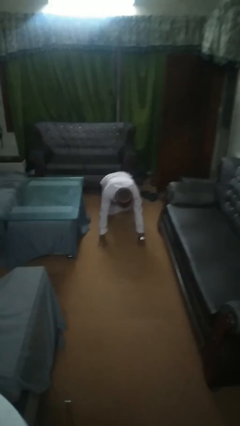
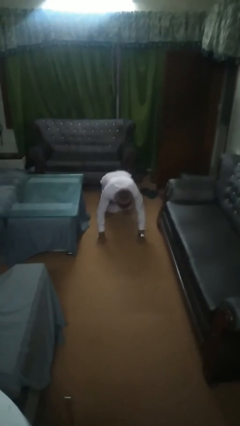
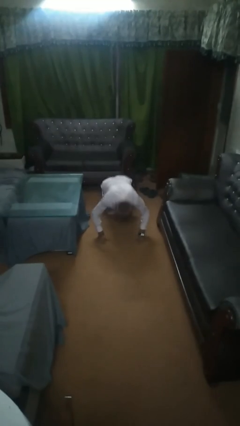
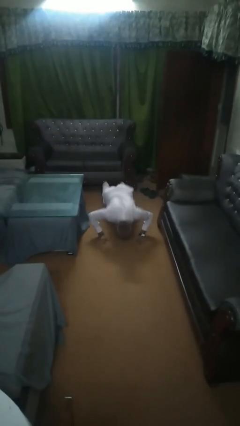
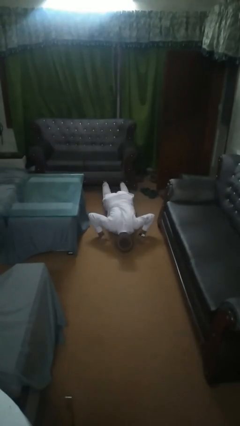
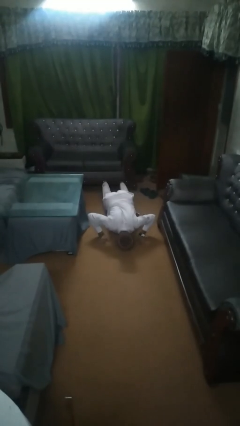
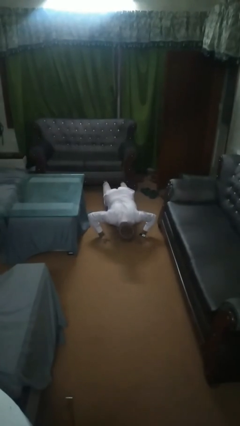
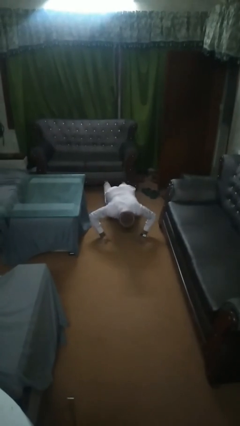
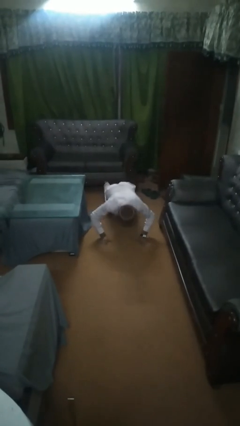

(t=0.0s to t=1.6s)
person exercises with pushup

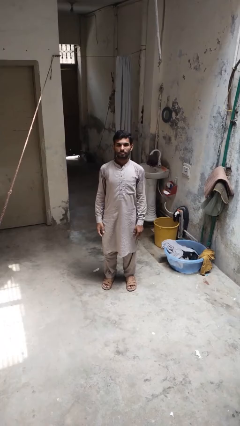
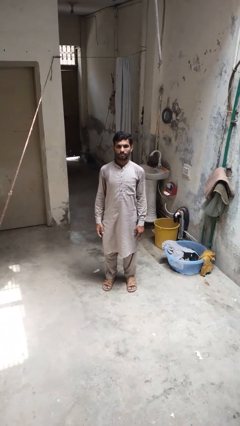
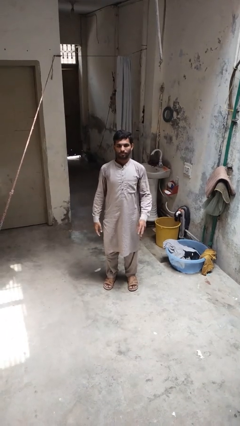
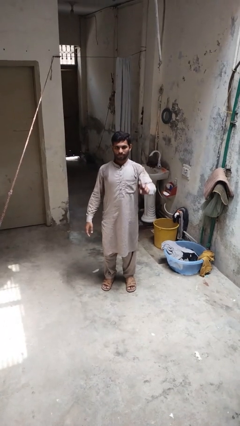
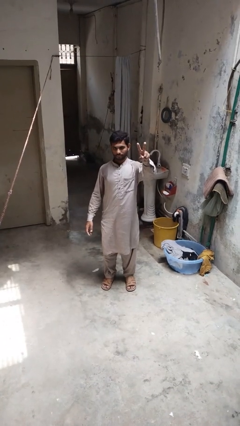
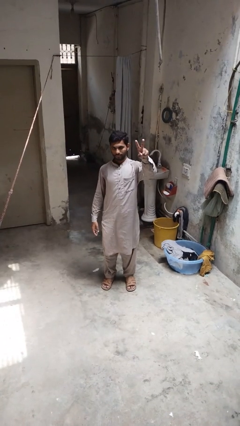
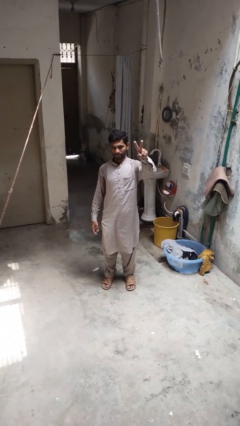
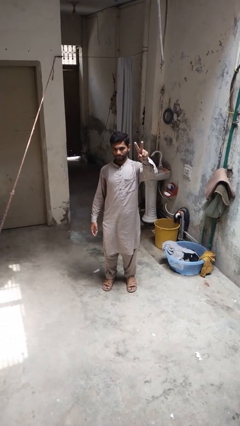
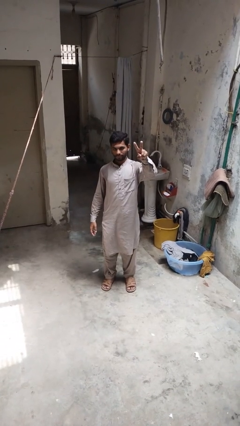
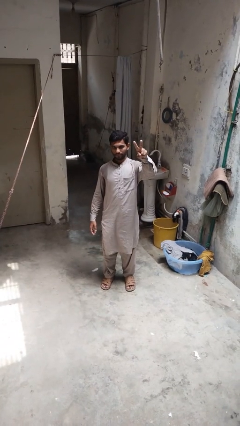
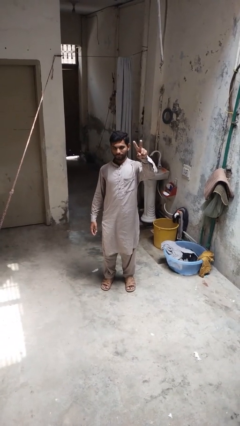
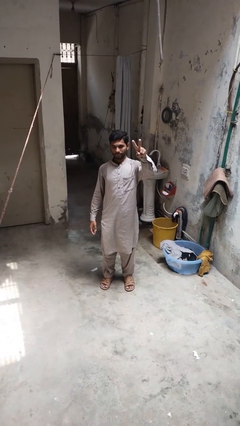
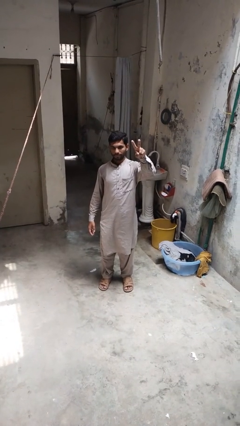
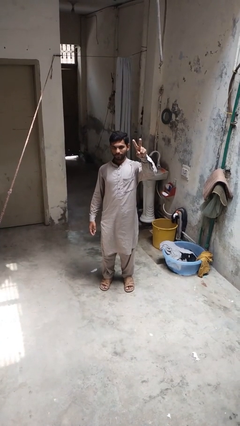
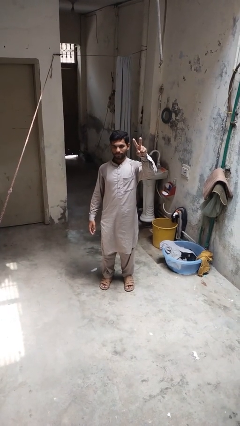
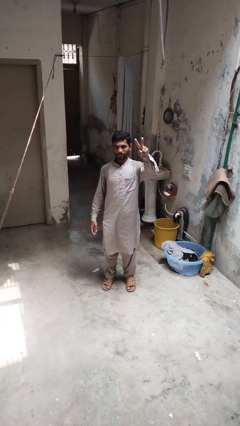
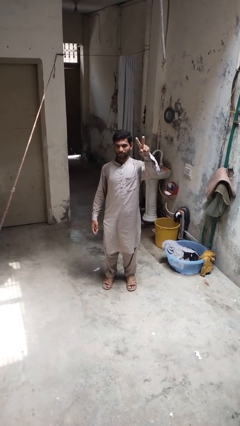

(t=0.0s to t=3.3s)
person gestures peace

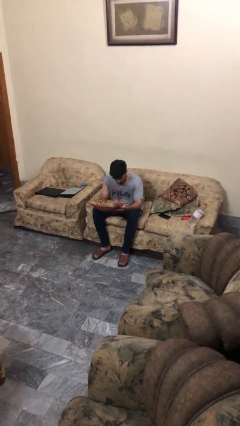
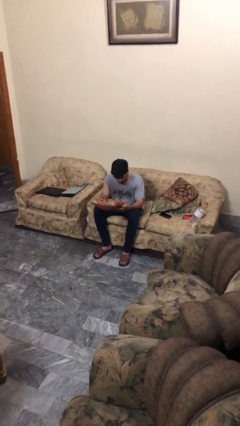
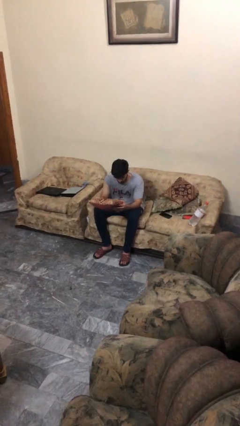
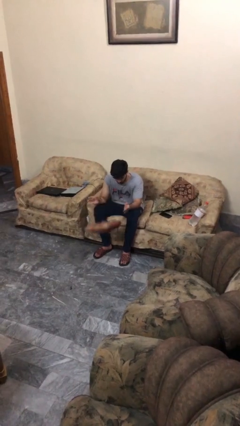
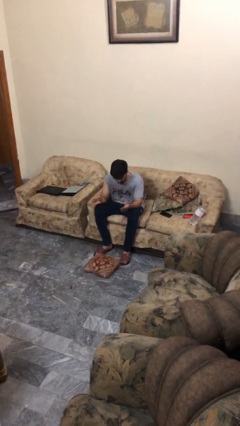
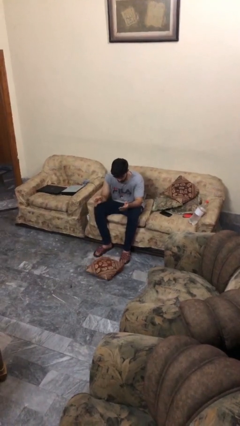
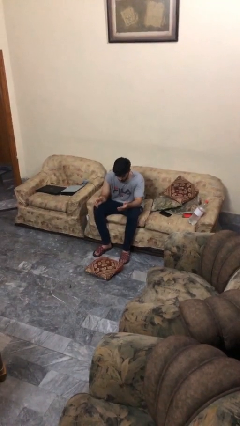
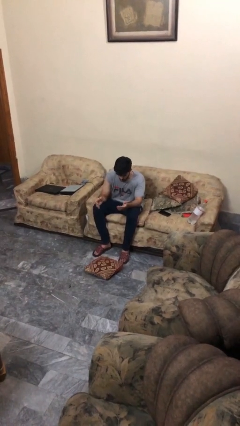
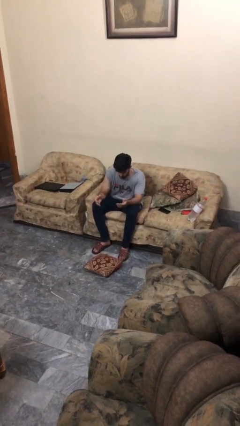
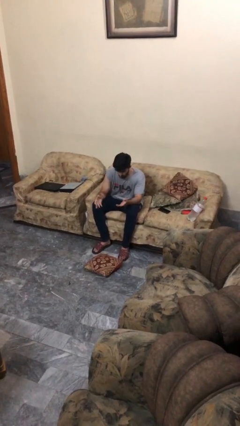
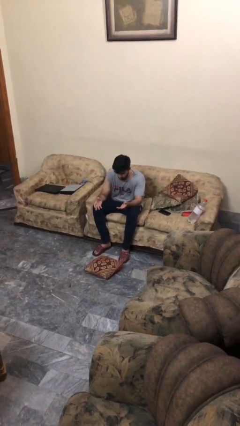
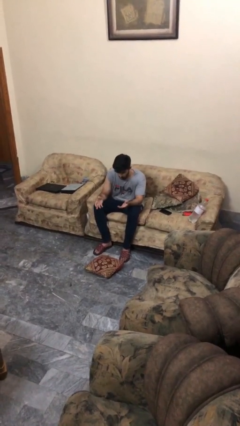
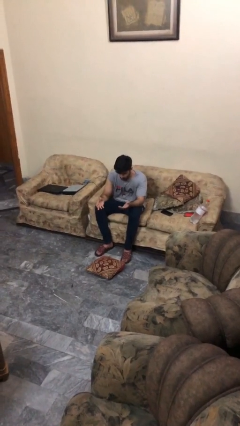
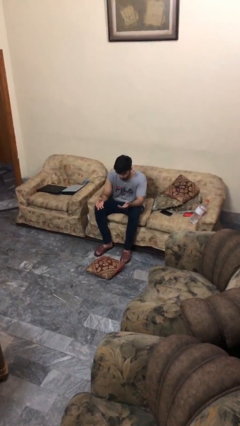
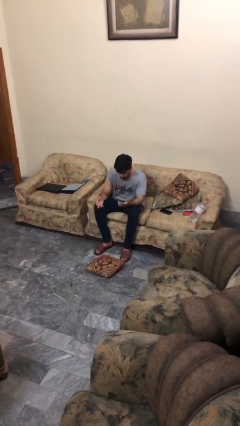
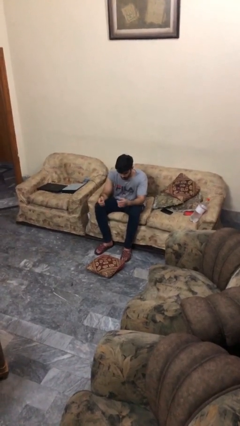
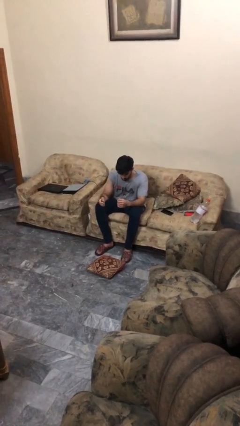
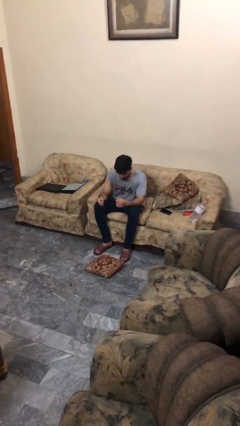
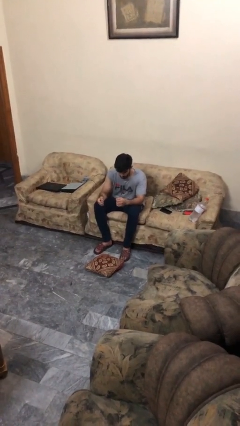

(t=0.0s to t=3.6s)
person drops object

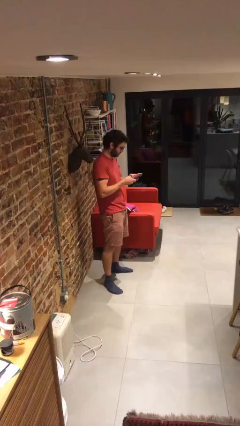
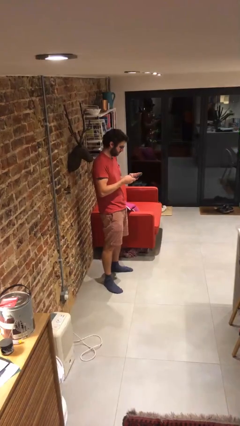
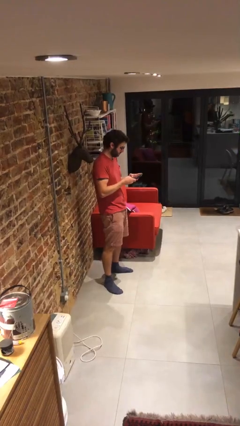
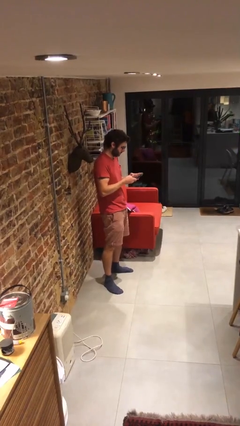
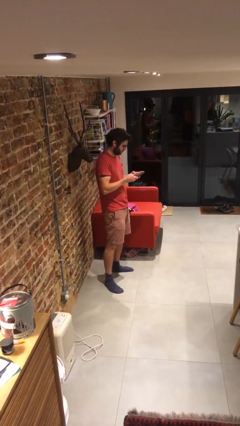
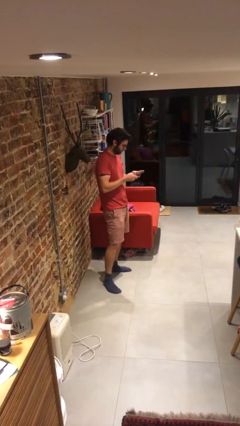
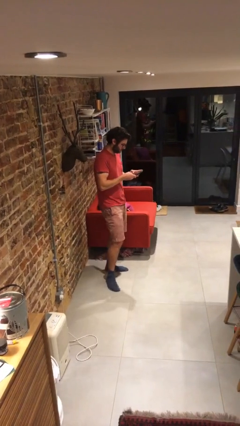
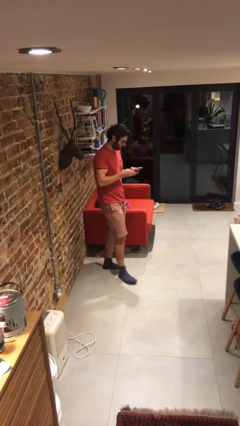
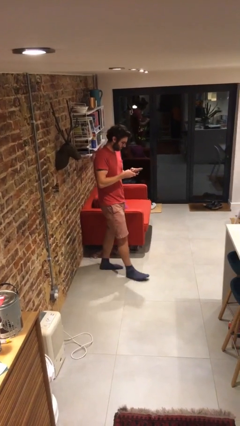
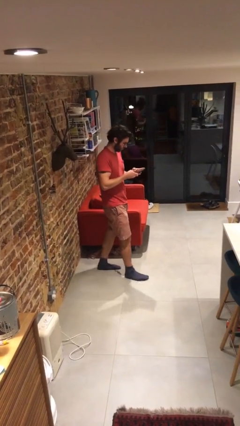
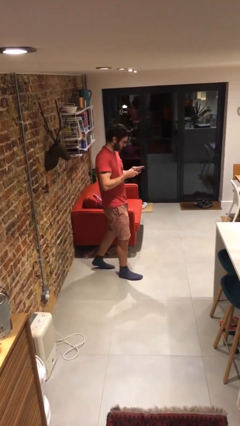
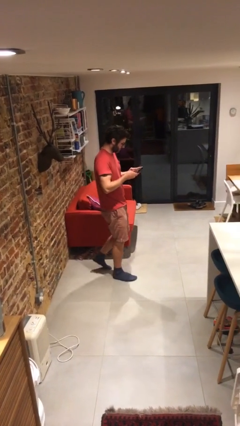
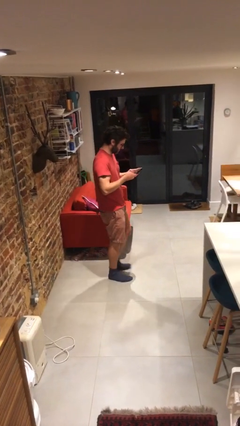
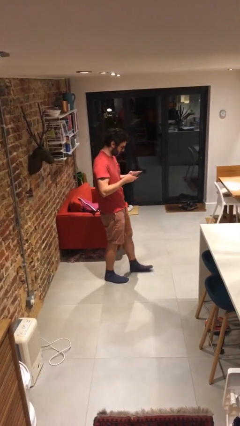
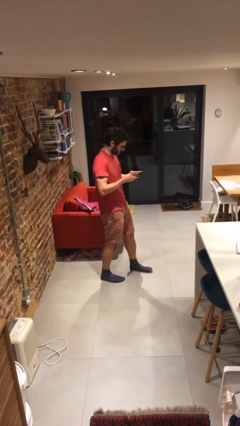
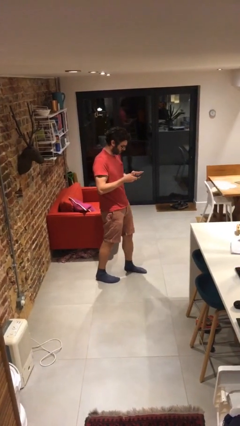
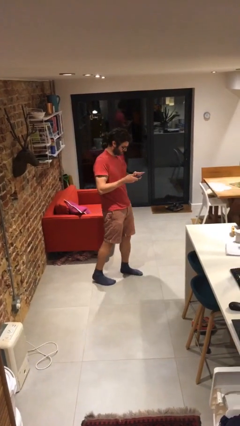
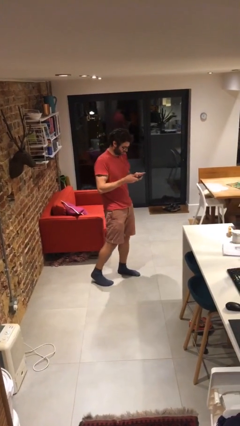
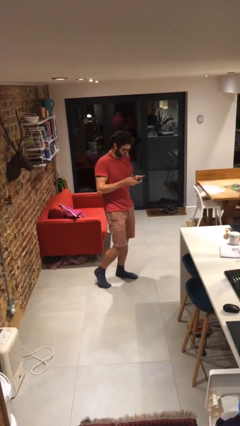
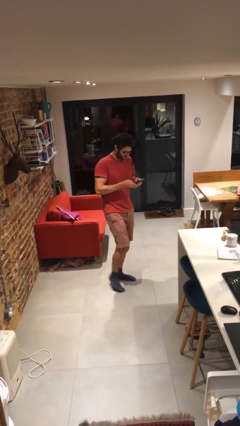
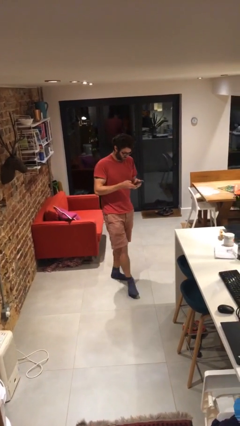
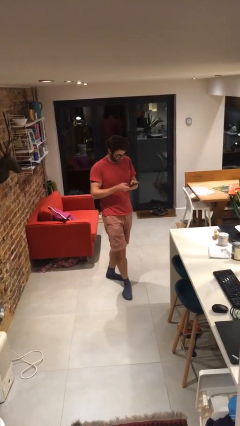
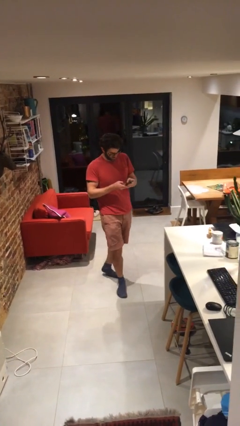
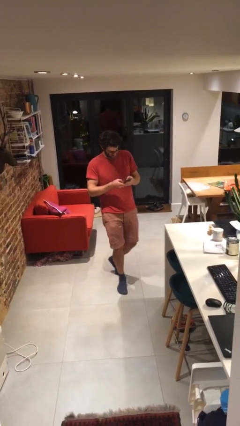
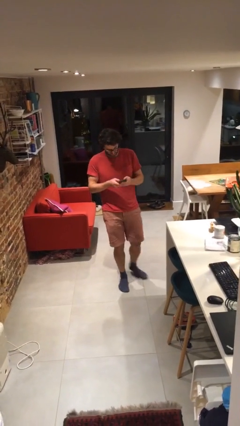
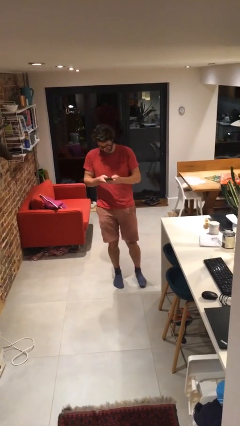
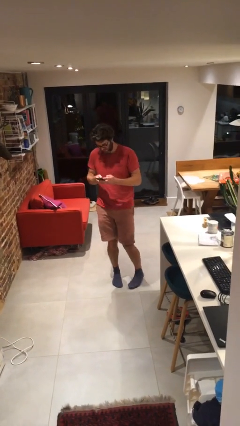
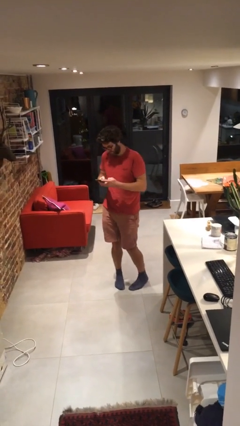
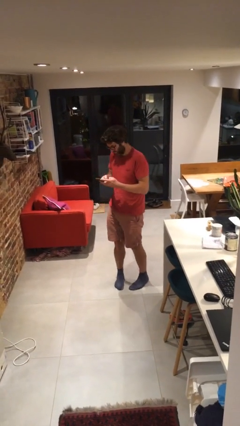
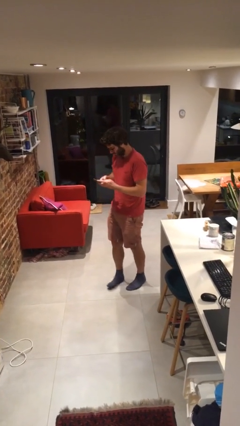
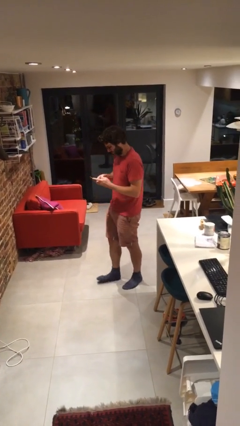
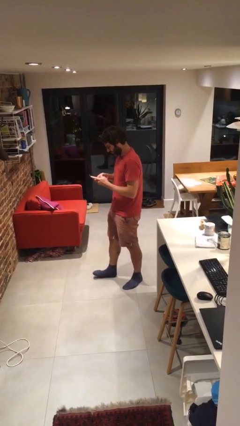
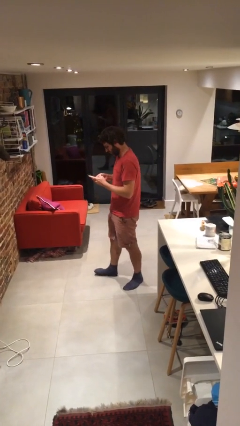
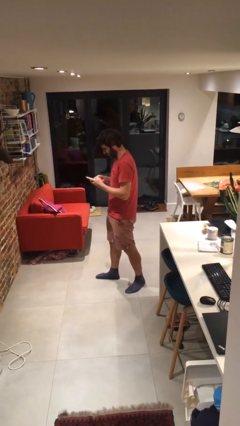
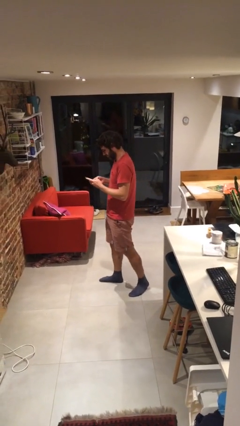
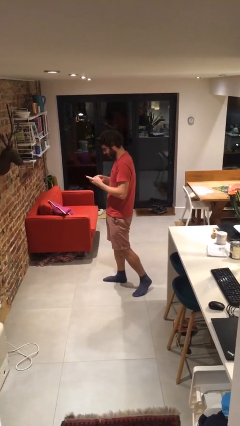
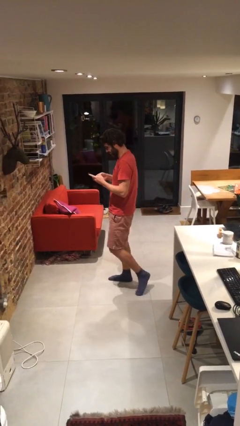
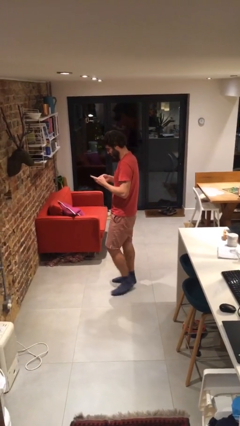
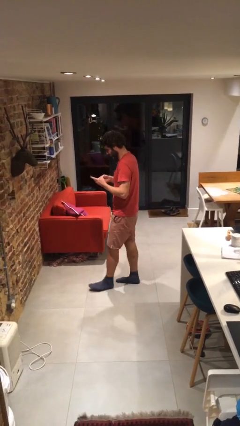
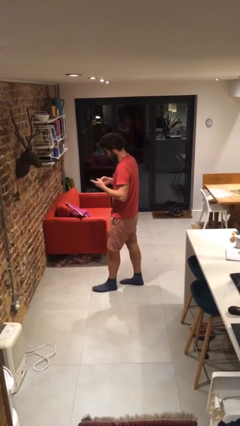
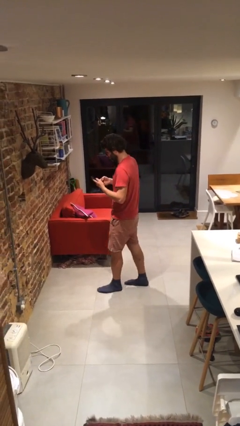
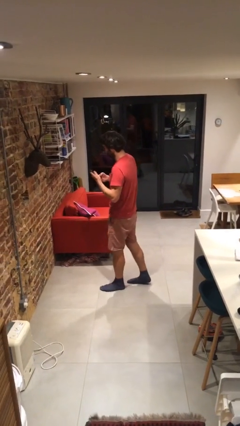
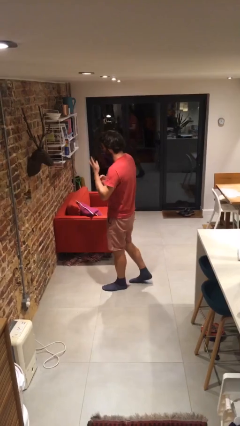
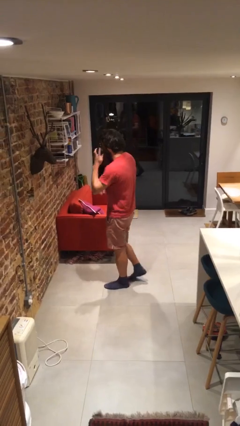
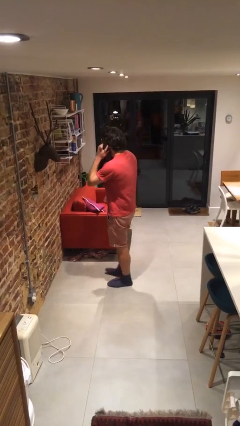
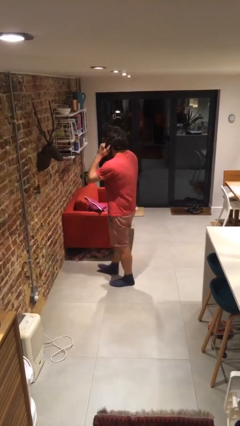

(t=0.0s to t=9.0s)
person texts on phone

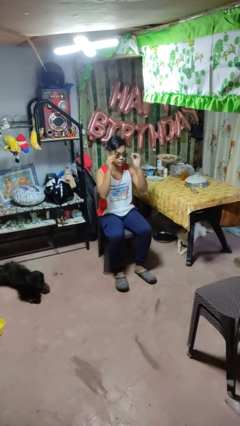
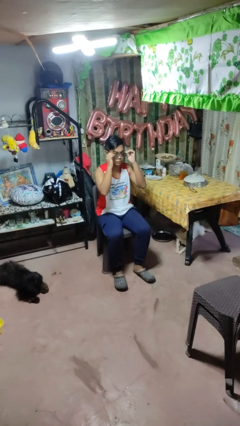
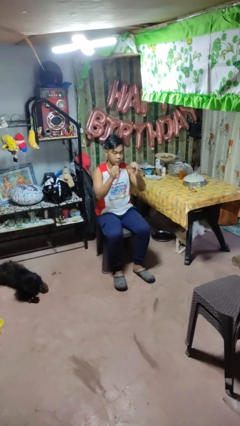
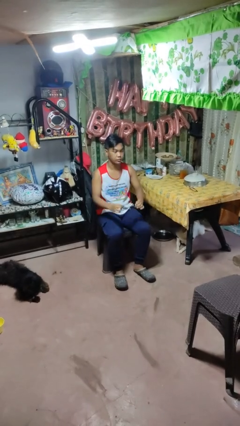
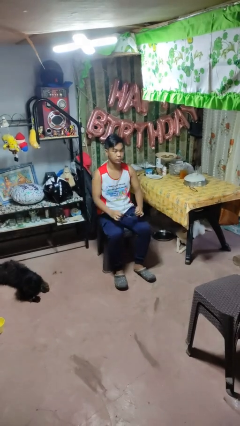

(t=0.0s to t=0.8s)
person takes off sunglasses
